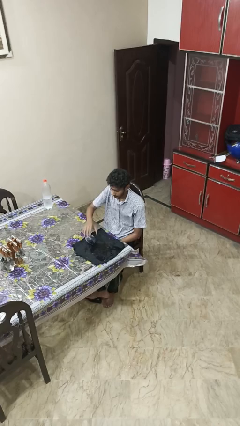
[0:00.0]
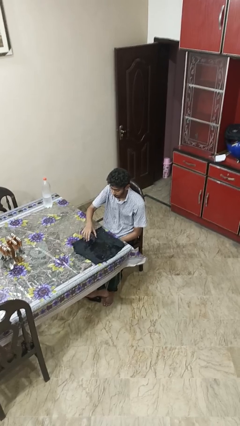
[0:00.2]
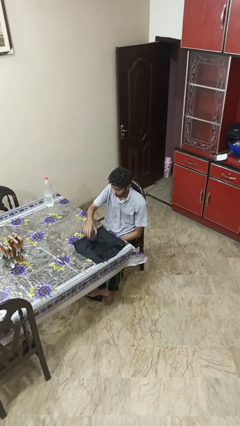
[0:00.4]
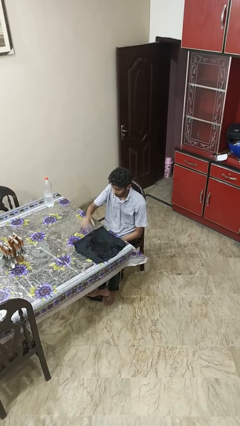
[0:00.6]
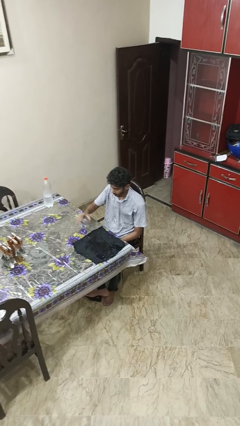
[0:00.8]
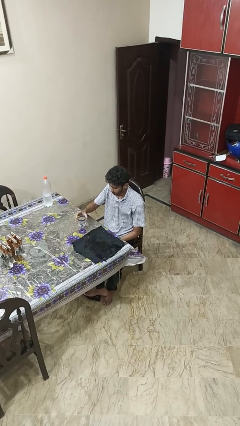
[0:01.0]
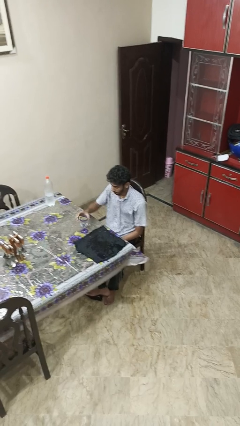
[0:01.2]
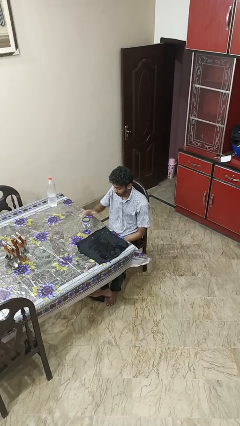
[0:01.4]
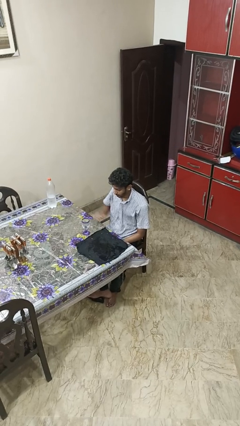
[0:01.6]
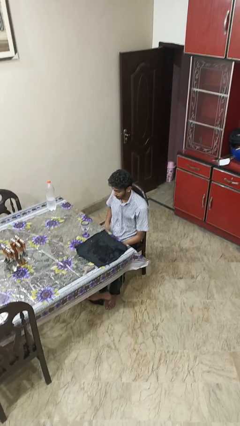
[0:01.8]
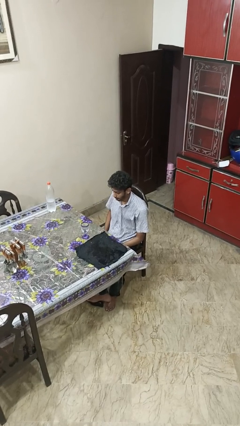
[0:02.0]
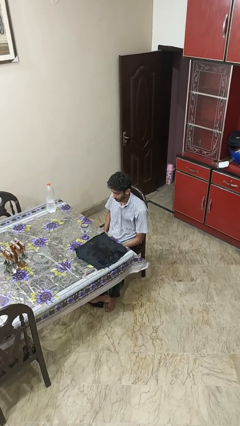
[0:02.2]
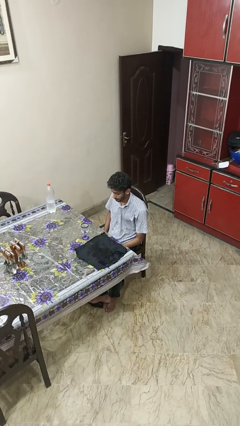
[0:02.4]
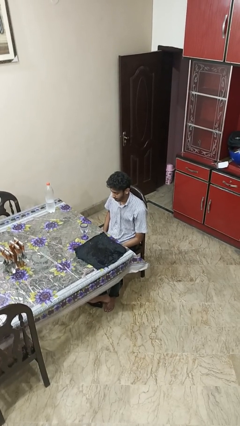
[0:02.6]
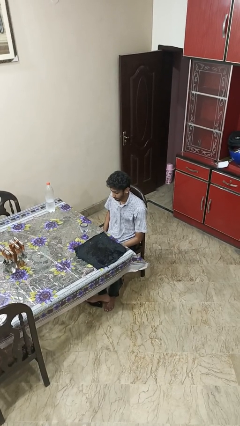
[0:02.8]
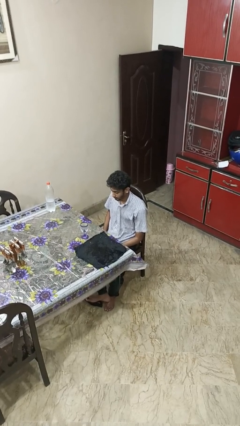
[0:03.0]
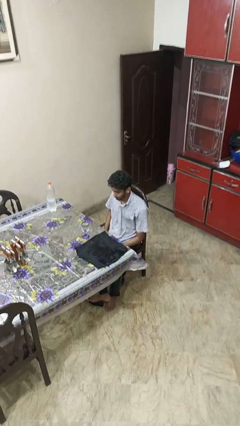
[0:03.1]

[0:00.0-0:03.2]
person sets upright glass

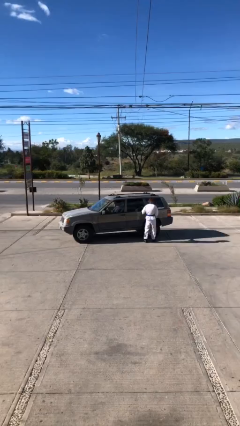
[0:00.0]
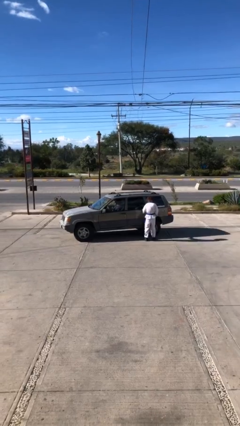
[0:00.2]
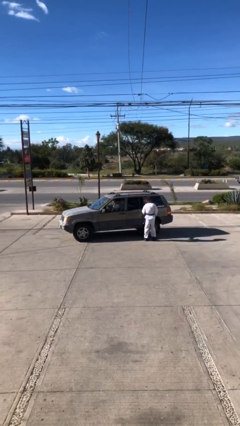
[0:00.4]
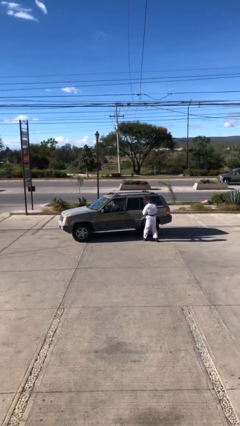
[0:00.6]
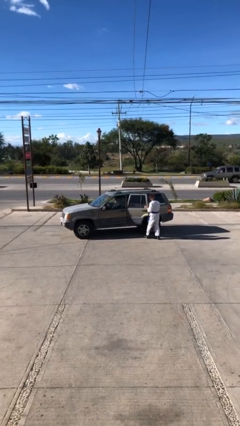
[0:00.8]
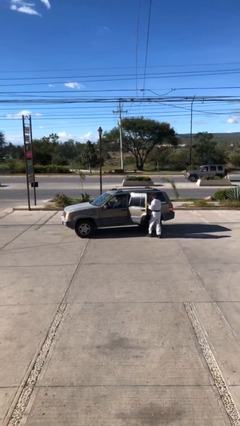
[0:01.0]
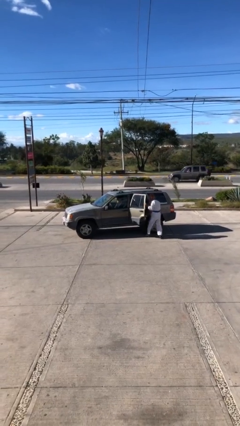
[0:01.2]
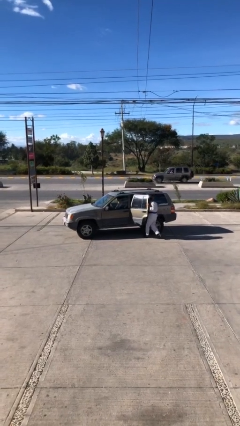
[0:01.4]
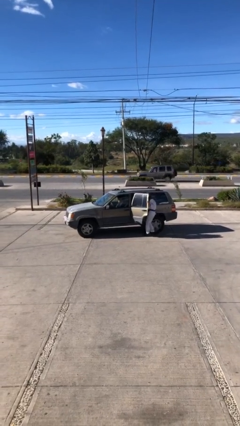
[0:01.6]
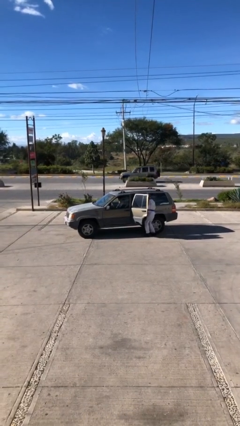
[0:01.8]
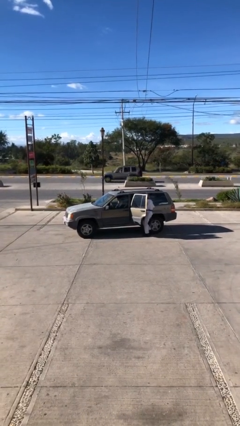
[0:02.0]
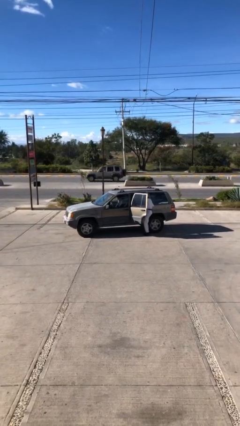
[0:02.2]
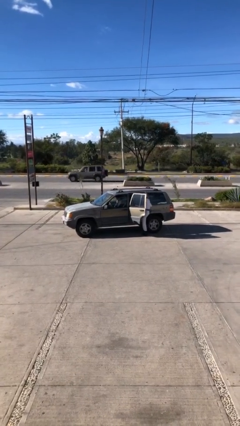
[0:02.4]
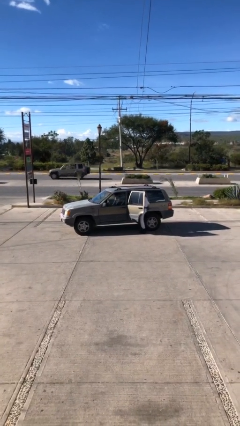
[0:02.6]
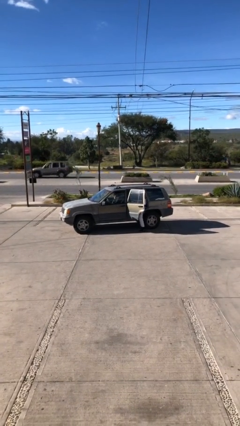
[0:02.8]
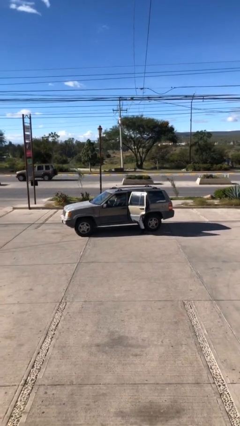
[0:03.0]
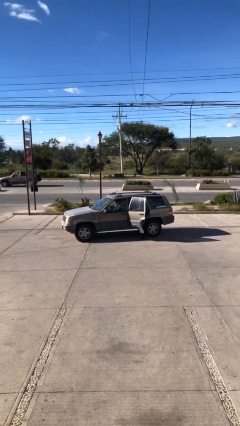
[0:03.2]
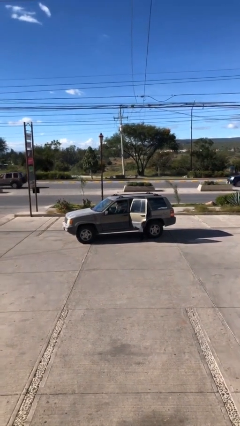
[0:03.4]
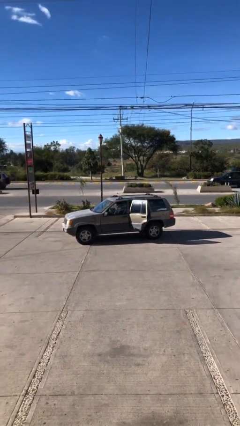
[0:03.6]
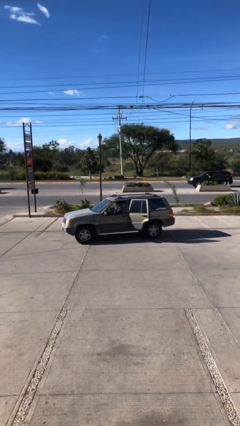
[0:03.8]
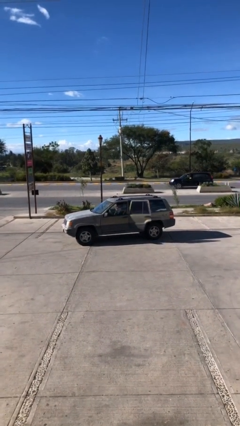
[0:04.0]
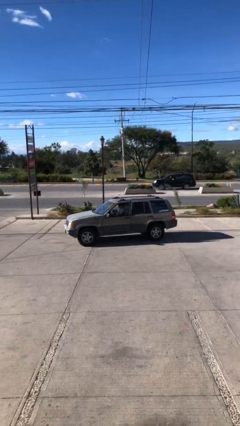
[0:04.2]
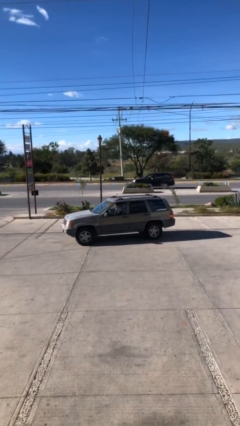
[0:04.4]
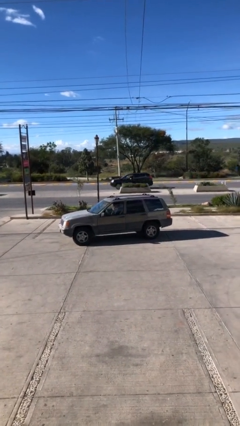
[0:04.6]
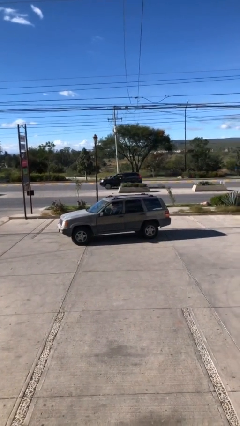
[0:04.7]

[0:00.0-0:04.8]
car picks up person

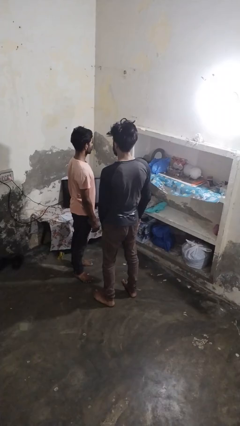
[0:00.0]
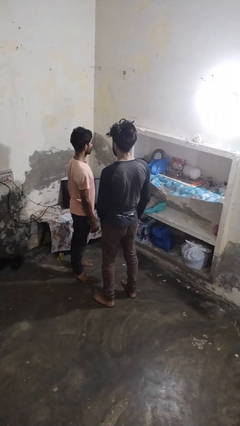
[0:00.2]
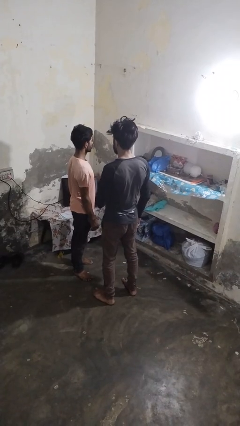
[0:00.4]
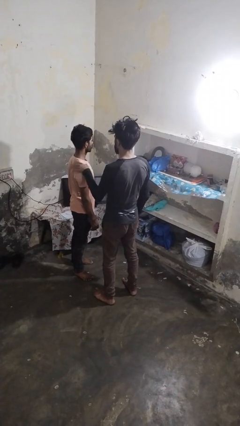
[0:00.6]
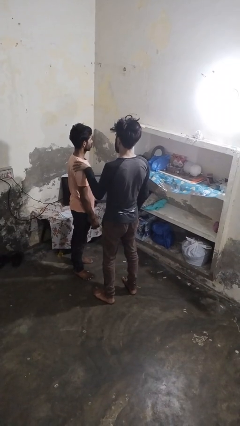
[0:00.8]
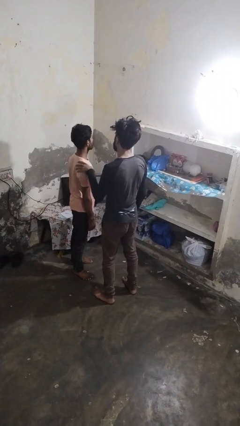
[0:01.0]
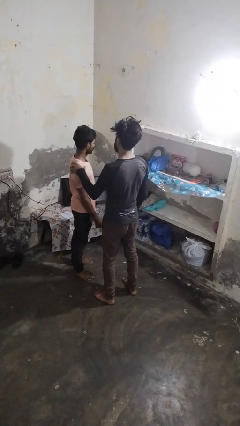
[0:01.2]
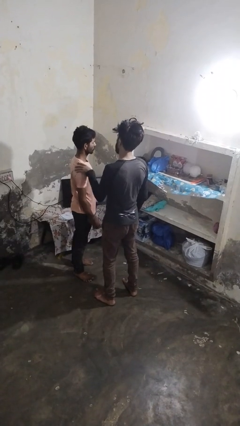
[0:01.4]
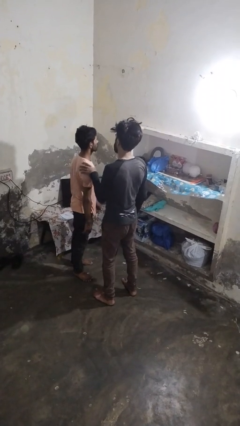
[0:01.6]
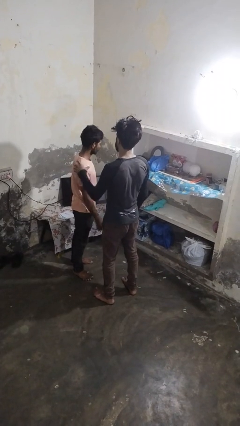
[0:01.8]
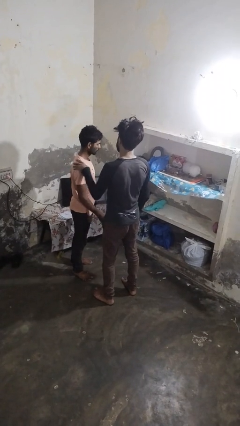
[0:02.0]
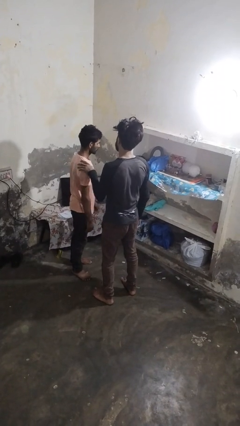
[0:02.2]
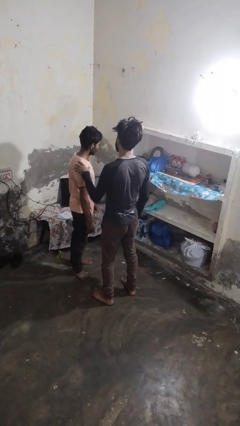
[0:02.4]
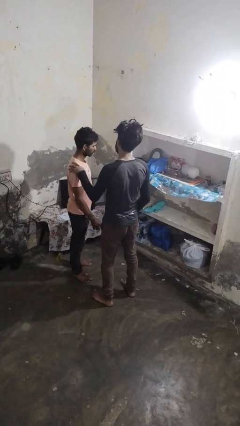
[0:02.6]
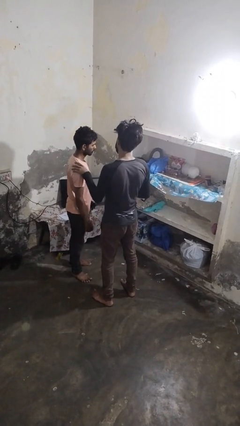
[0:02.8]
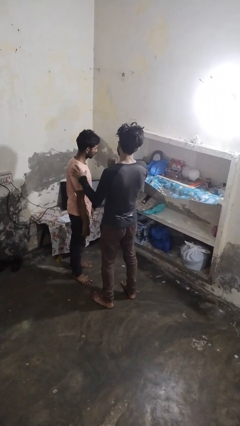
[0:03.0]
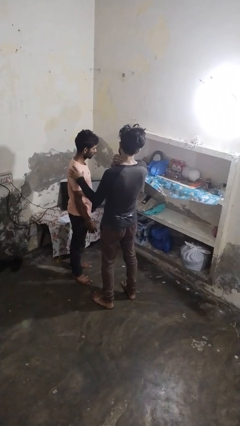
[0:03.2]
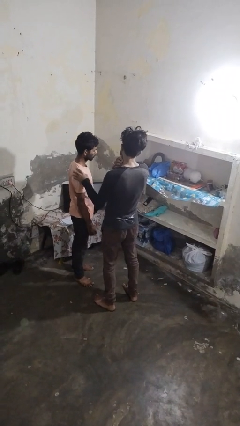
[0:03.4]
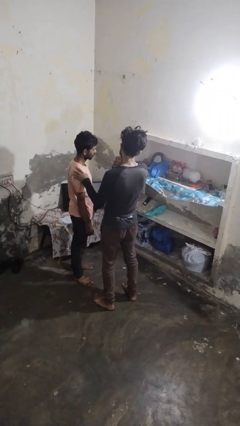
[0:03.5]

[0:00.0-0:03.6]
person grabs person by shoulder

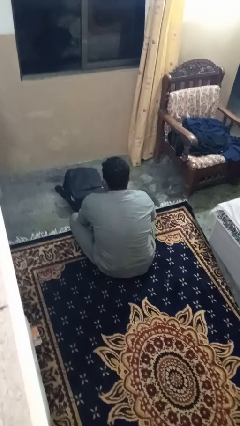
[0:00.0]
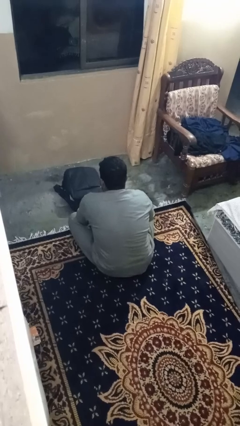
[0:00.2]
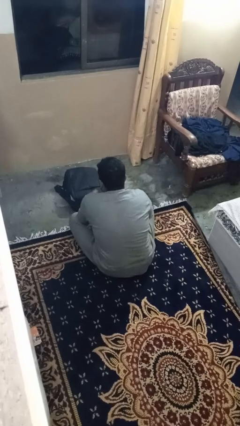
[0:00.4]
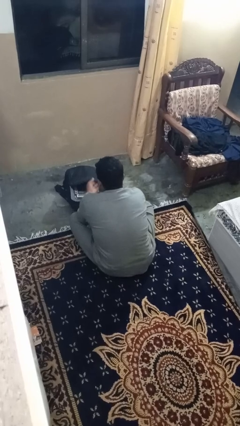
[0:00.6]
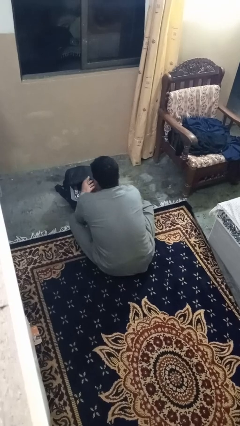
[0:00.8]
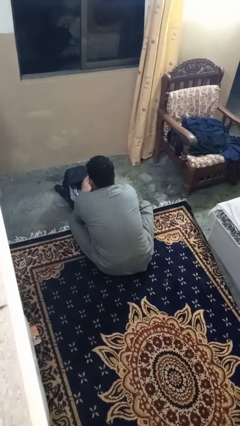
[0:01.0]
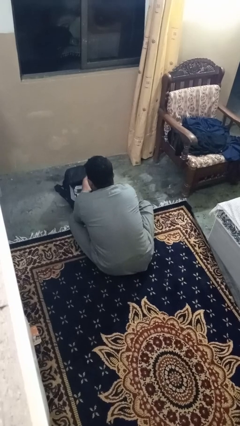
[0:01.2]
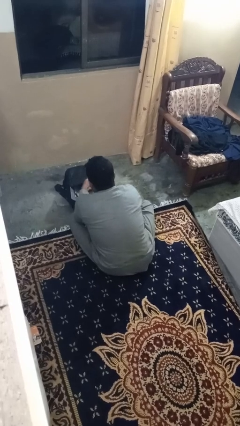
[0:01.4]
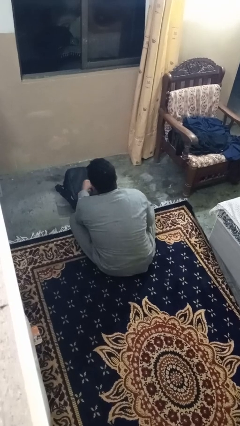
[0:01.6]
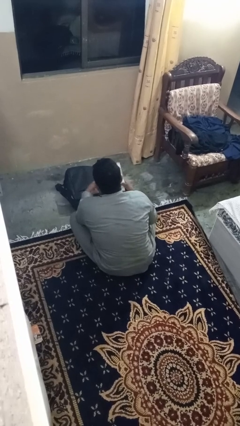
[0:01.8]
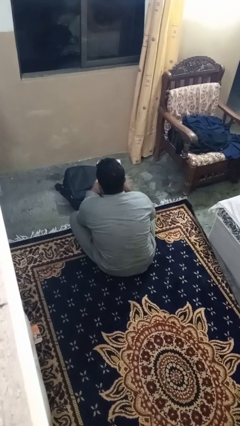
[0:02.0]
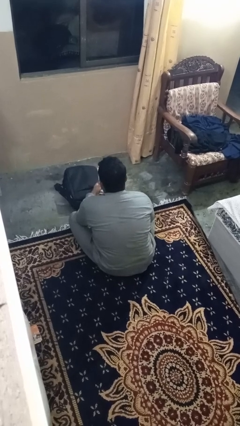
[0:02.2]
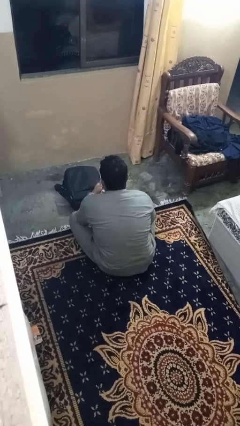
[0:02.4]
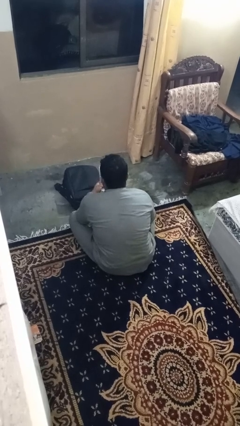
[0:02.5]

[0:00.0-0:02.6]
person takes object from bag

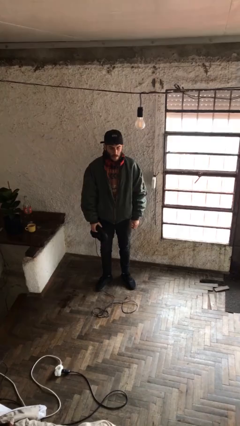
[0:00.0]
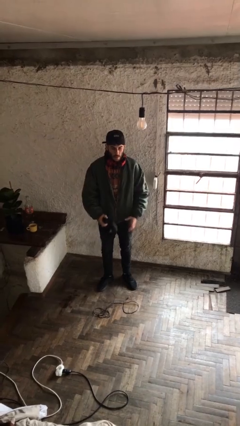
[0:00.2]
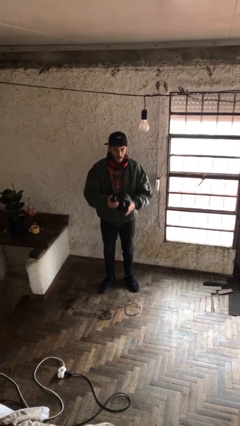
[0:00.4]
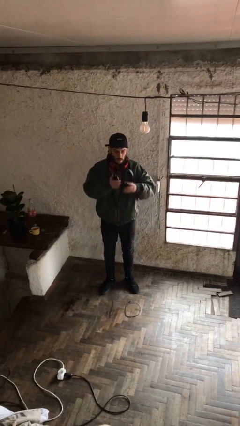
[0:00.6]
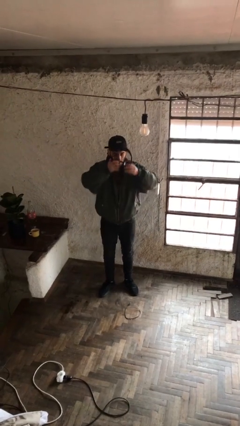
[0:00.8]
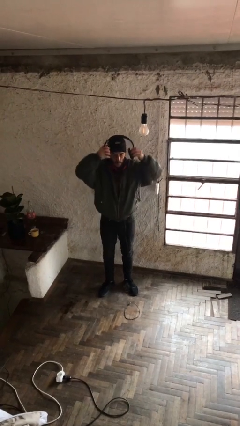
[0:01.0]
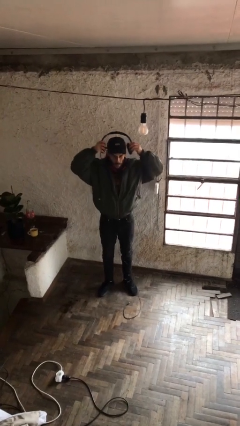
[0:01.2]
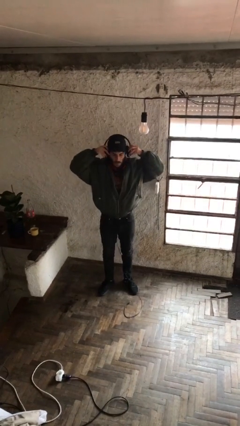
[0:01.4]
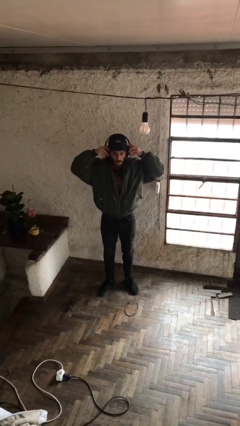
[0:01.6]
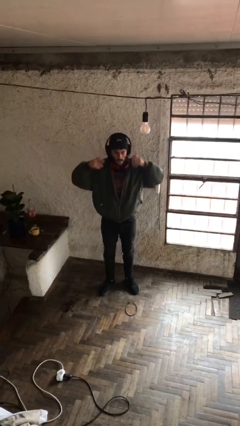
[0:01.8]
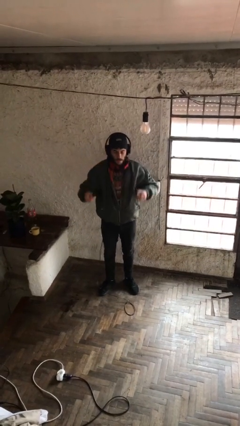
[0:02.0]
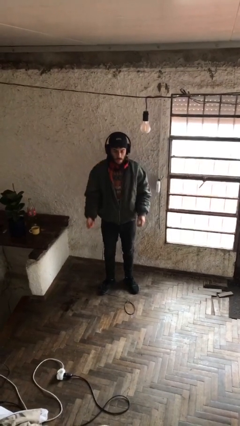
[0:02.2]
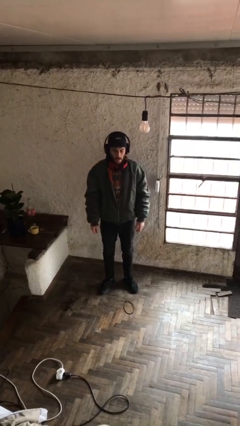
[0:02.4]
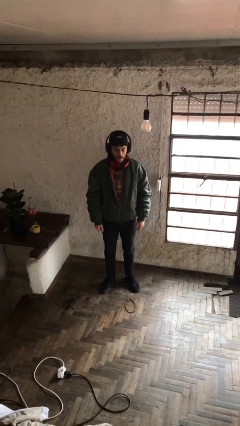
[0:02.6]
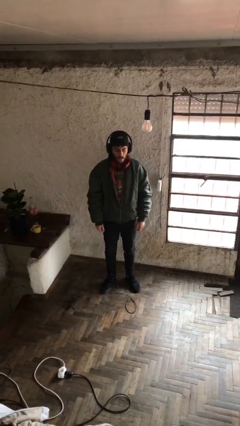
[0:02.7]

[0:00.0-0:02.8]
person puts on headphones

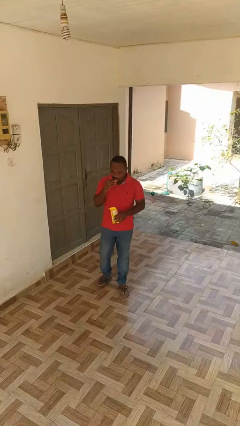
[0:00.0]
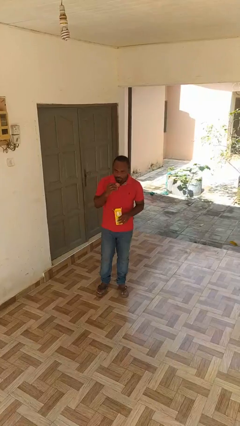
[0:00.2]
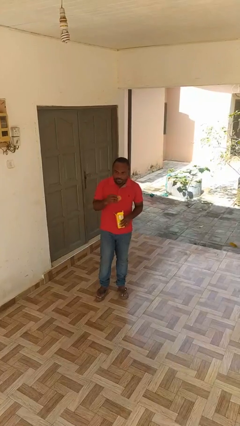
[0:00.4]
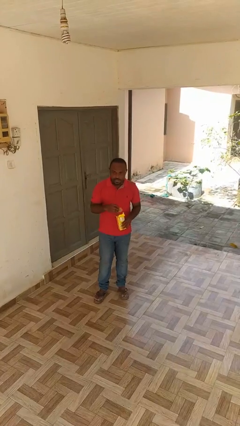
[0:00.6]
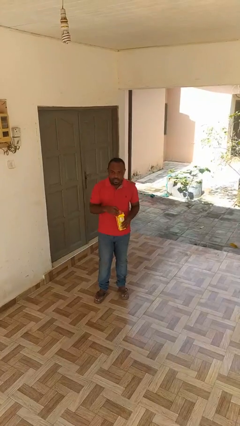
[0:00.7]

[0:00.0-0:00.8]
person eats snack from bag
